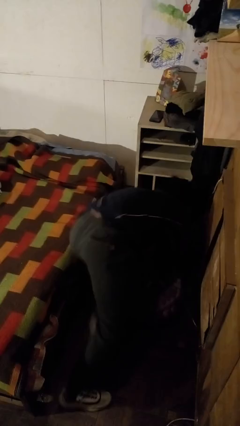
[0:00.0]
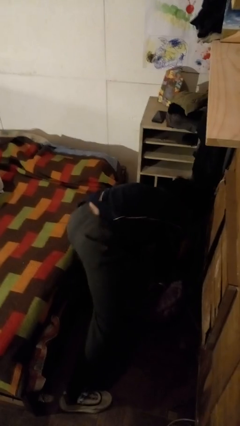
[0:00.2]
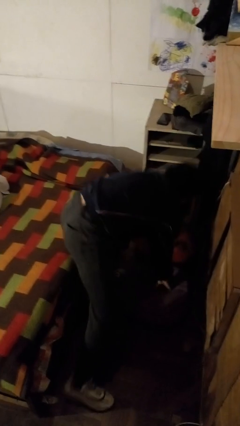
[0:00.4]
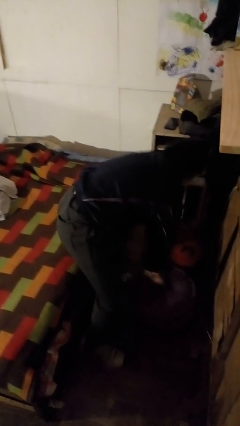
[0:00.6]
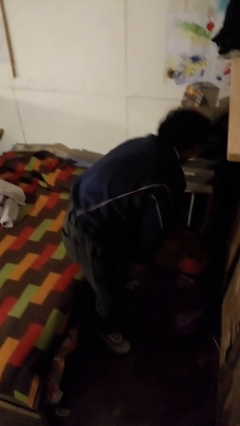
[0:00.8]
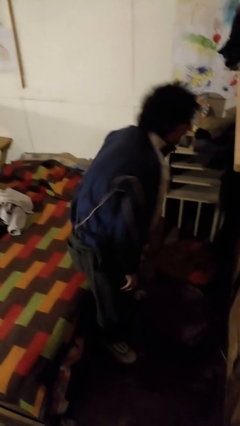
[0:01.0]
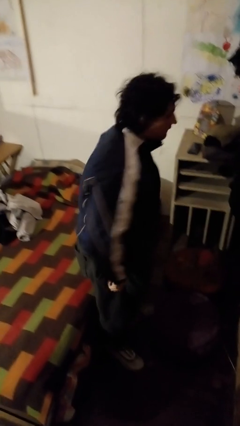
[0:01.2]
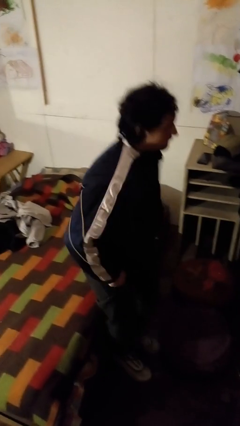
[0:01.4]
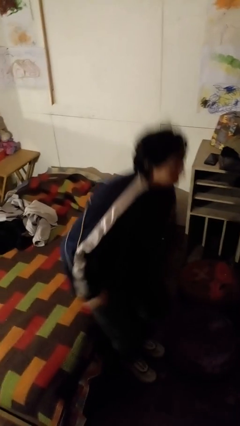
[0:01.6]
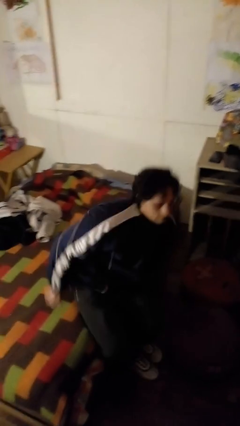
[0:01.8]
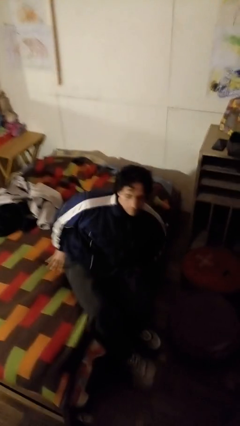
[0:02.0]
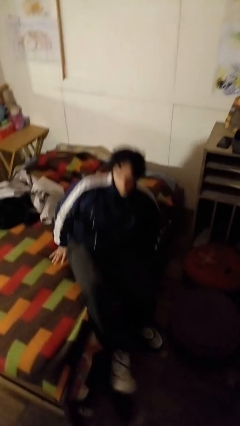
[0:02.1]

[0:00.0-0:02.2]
person stands up from floor

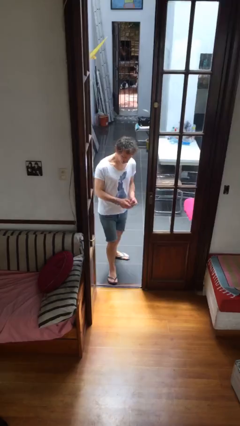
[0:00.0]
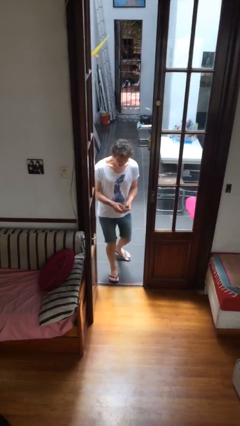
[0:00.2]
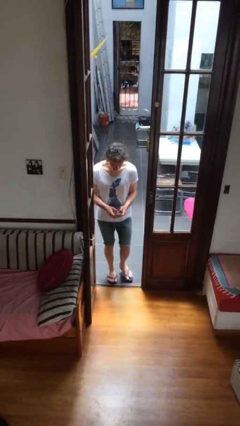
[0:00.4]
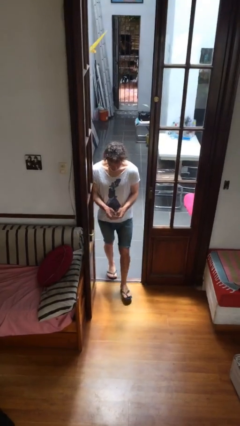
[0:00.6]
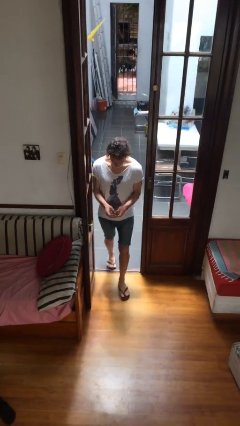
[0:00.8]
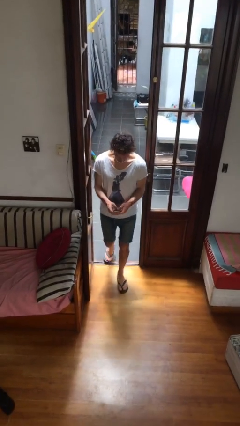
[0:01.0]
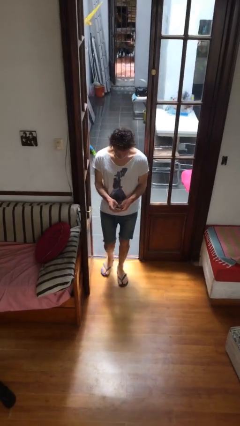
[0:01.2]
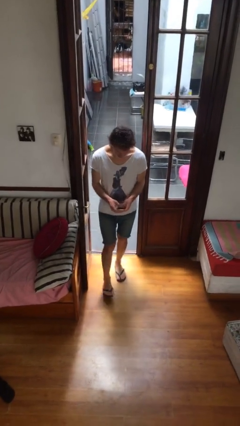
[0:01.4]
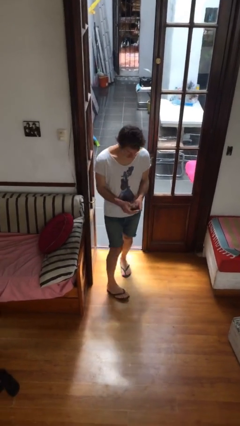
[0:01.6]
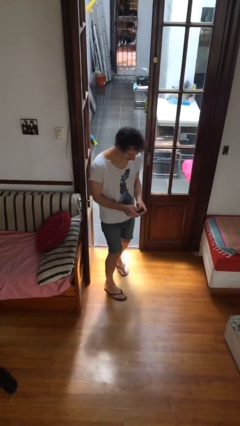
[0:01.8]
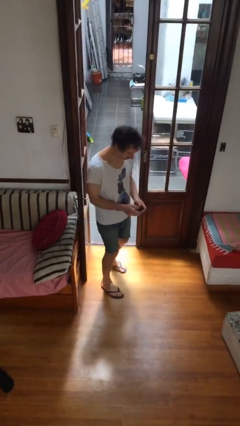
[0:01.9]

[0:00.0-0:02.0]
person enters scene through structure

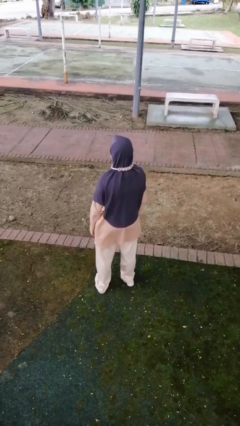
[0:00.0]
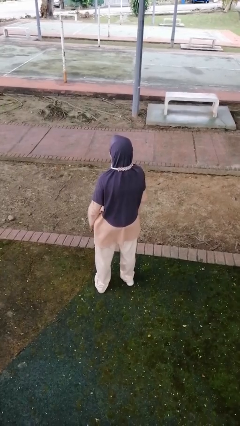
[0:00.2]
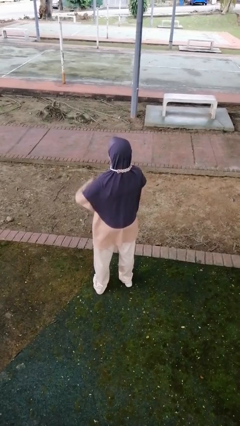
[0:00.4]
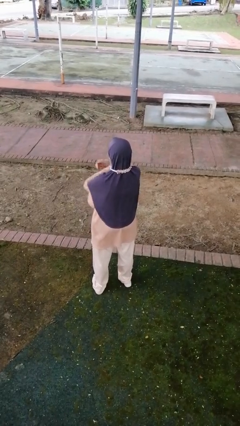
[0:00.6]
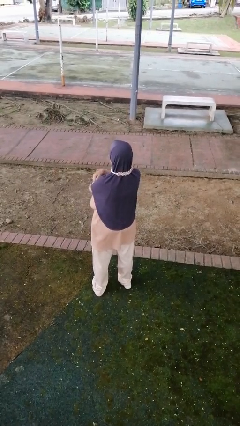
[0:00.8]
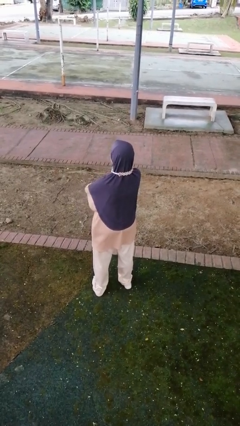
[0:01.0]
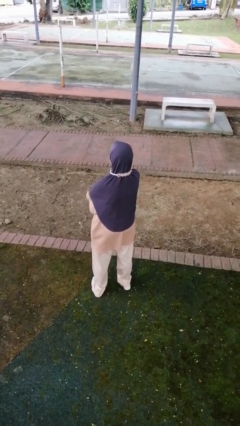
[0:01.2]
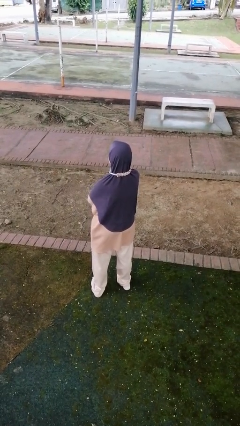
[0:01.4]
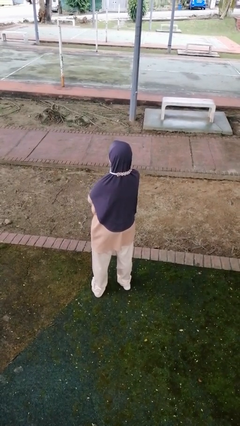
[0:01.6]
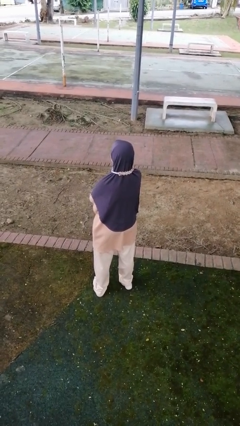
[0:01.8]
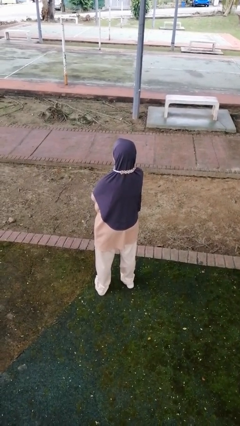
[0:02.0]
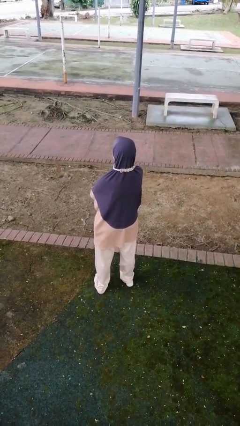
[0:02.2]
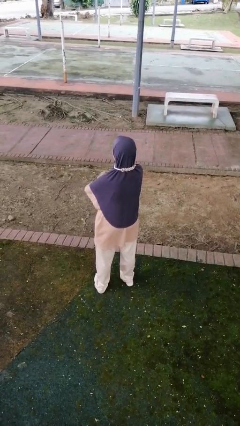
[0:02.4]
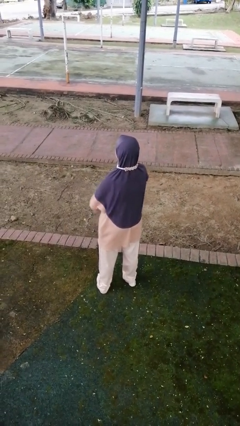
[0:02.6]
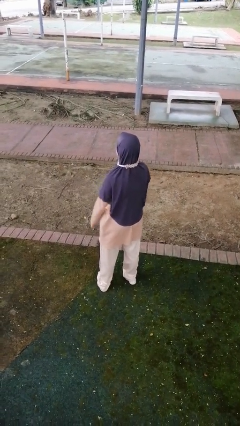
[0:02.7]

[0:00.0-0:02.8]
person crosses arms

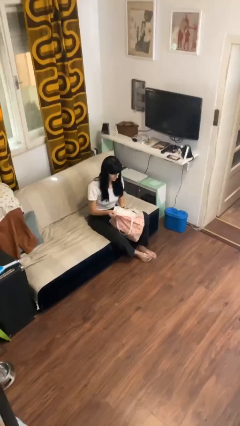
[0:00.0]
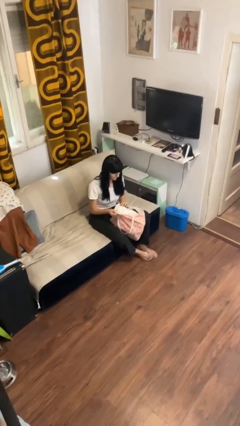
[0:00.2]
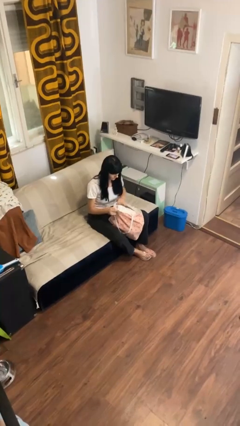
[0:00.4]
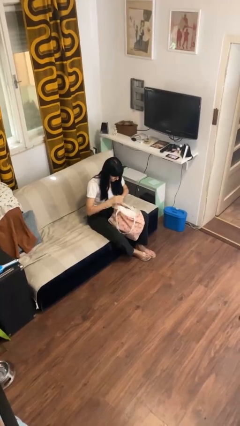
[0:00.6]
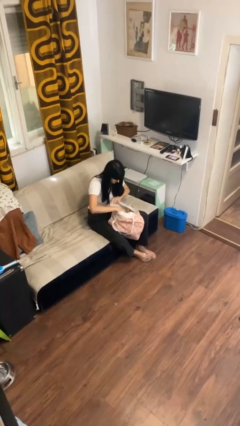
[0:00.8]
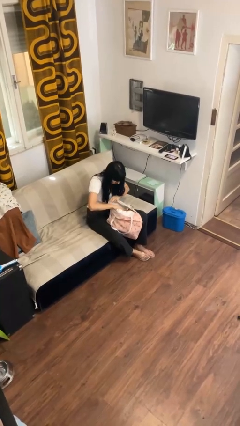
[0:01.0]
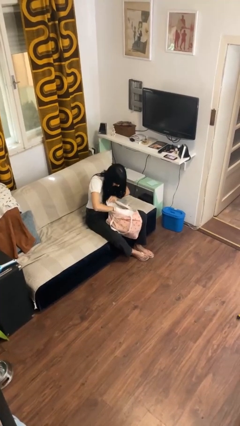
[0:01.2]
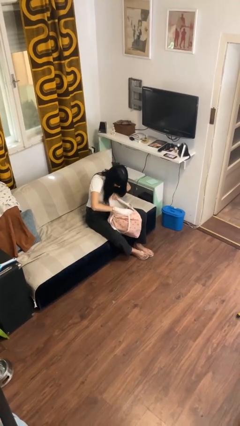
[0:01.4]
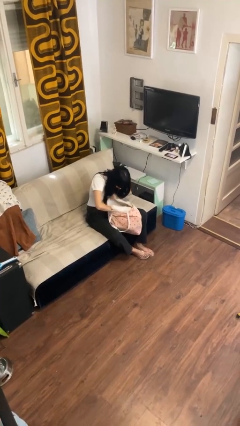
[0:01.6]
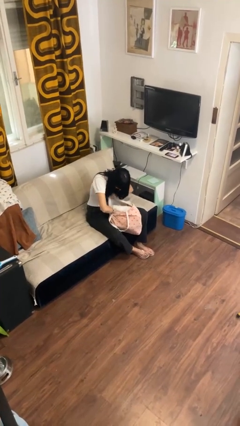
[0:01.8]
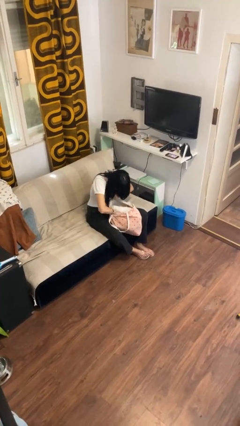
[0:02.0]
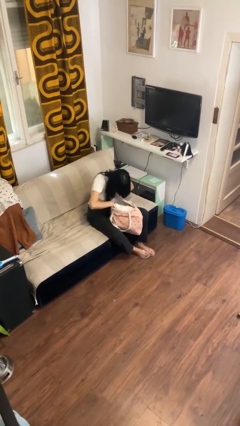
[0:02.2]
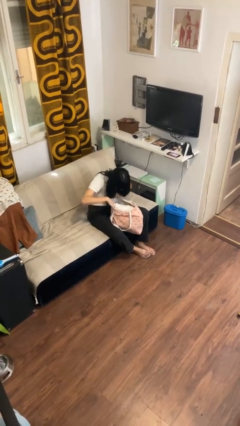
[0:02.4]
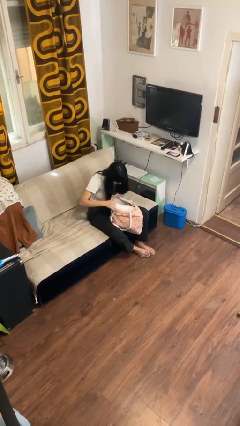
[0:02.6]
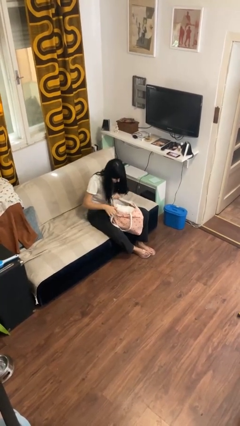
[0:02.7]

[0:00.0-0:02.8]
person searches in bag

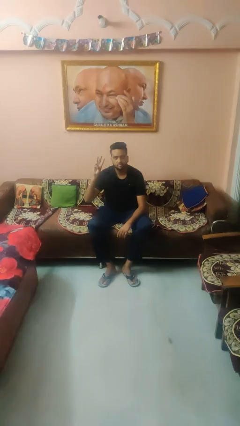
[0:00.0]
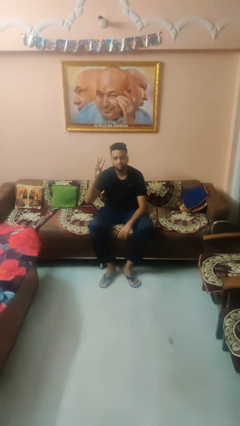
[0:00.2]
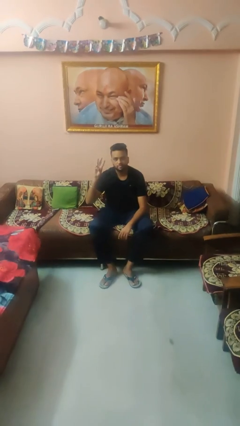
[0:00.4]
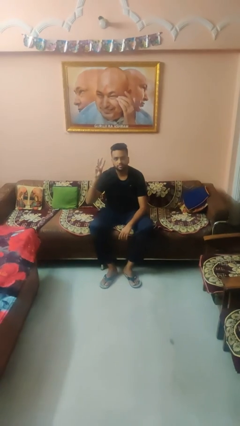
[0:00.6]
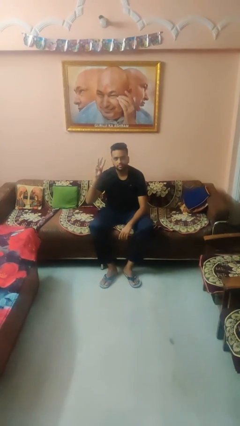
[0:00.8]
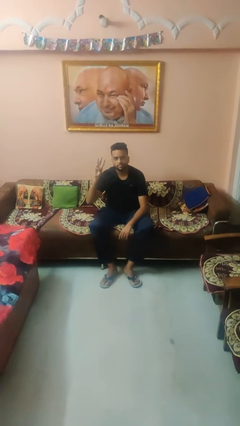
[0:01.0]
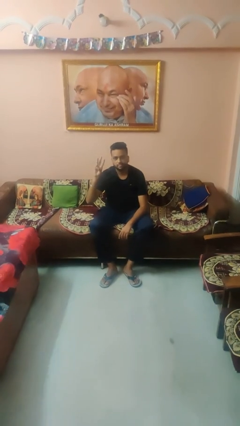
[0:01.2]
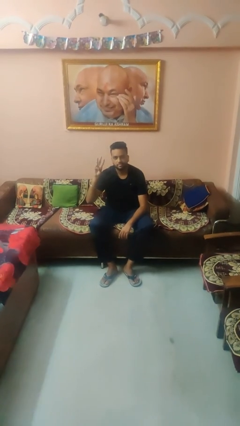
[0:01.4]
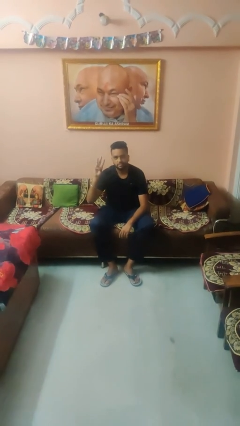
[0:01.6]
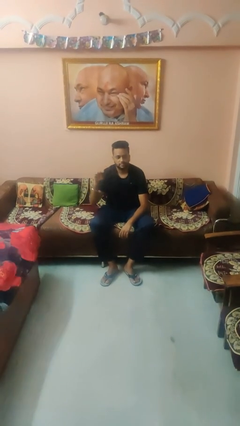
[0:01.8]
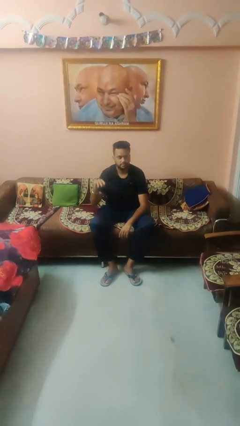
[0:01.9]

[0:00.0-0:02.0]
person gestures number three

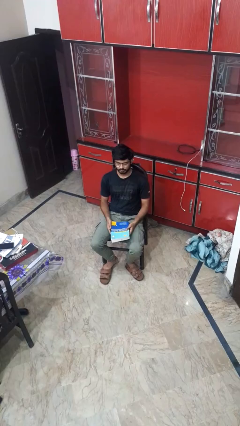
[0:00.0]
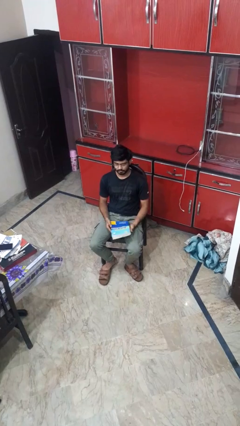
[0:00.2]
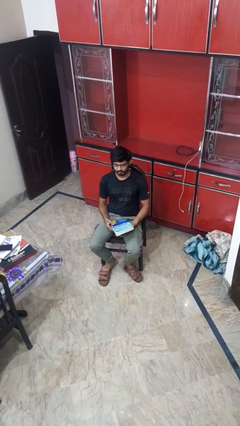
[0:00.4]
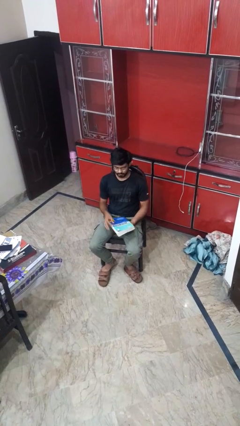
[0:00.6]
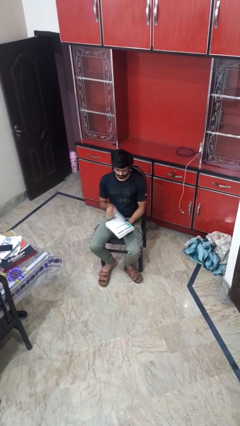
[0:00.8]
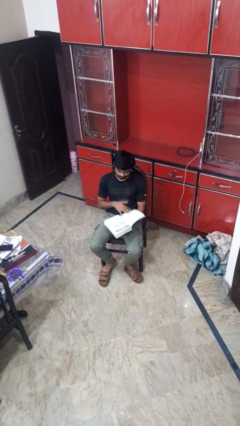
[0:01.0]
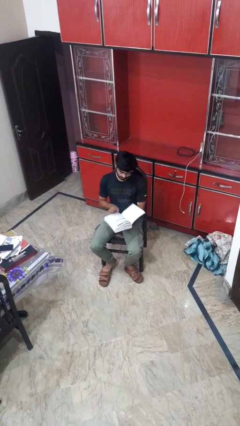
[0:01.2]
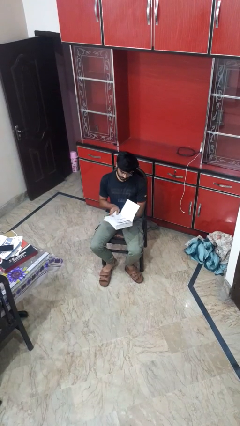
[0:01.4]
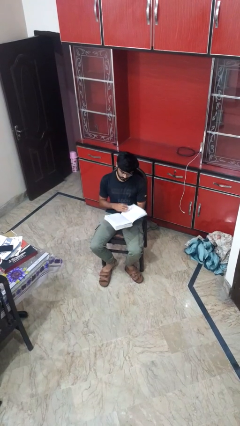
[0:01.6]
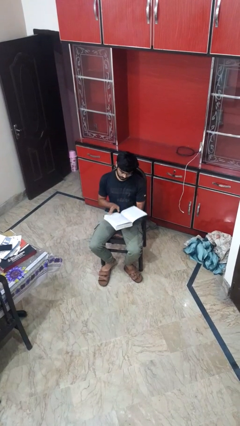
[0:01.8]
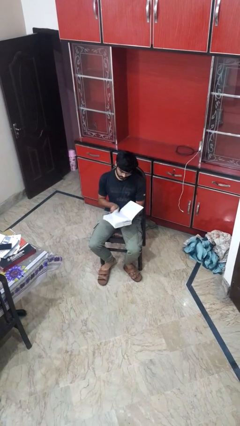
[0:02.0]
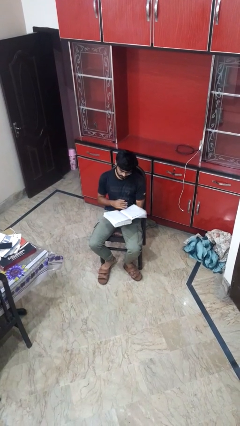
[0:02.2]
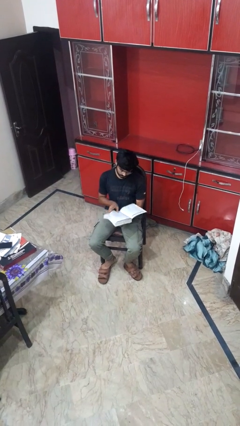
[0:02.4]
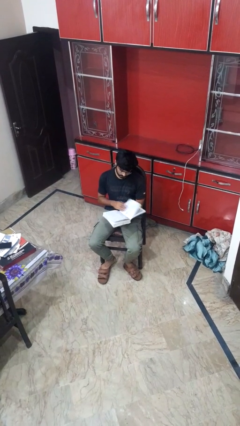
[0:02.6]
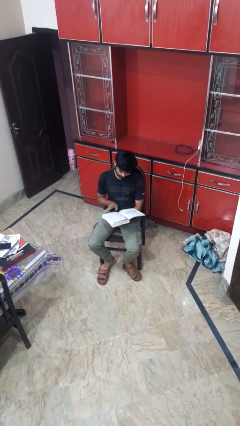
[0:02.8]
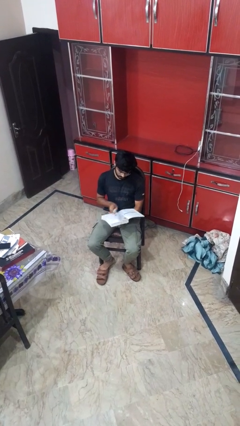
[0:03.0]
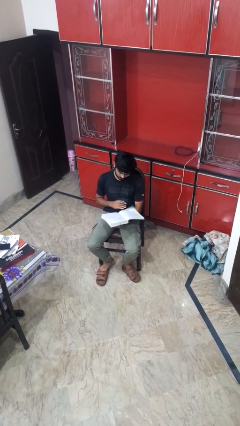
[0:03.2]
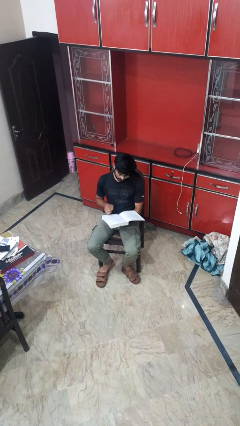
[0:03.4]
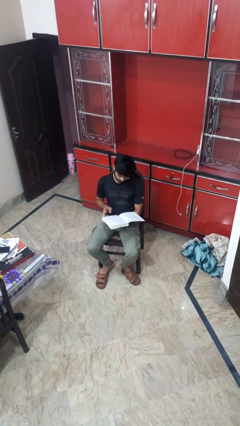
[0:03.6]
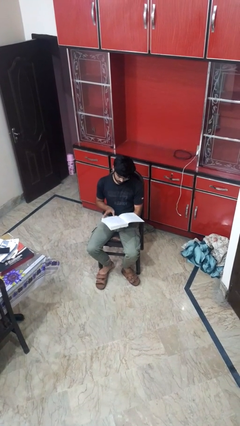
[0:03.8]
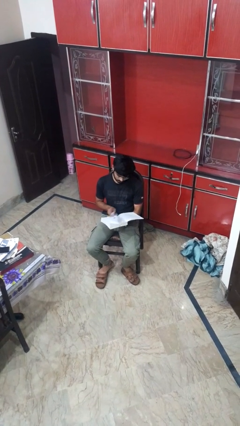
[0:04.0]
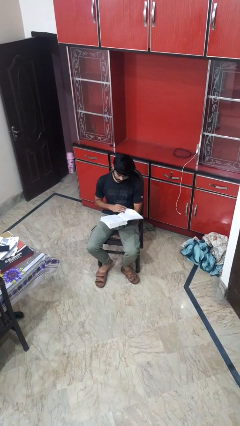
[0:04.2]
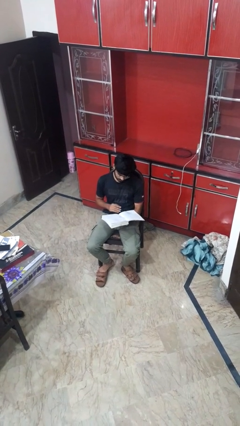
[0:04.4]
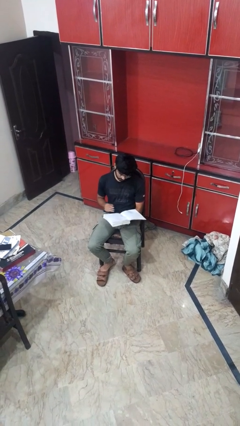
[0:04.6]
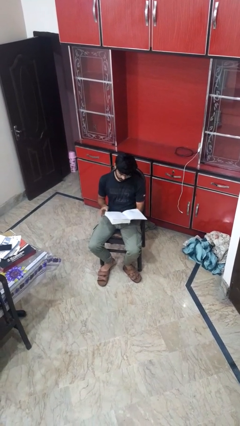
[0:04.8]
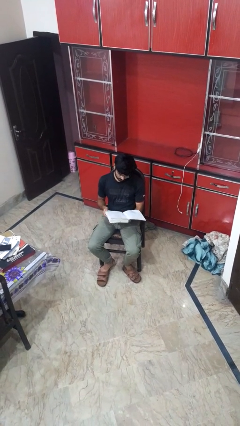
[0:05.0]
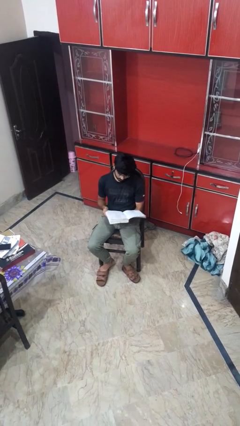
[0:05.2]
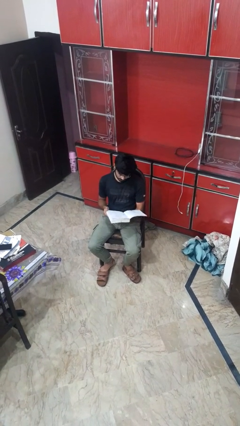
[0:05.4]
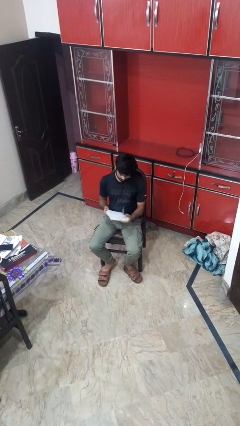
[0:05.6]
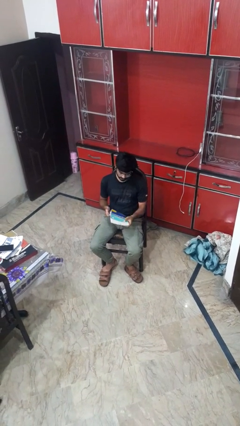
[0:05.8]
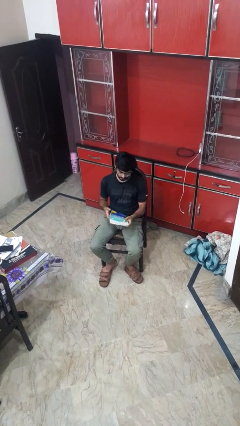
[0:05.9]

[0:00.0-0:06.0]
person reads book
